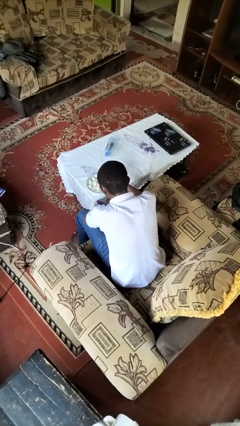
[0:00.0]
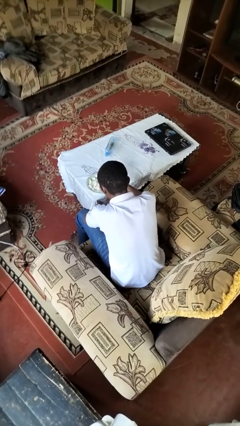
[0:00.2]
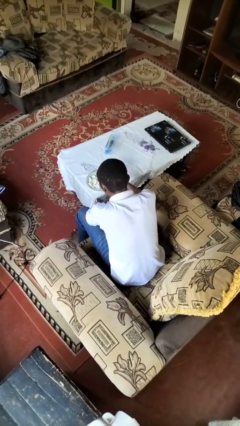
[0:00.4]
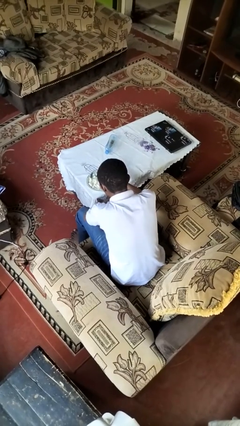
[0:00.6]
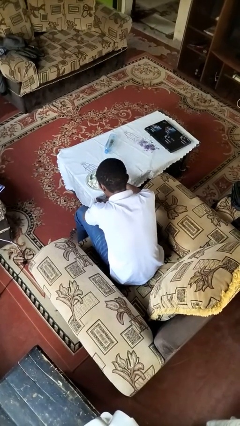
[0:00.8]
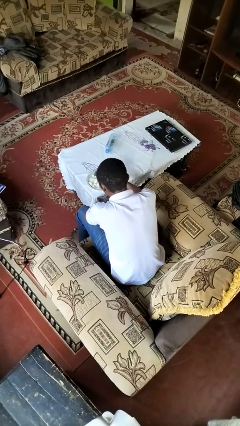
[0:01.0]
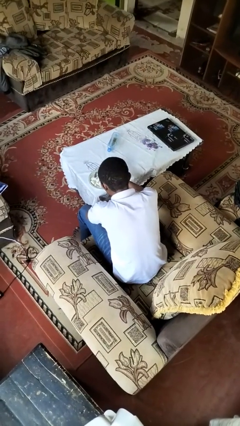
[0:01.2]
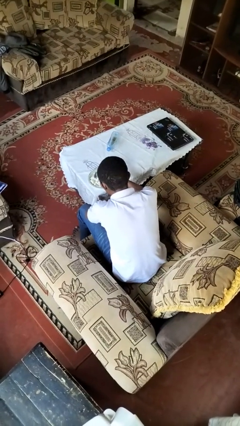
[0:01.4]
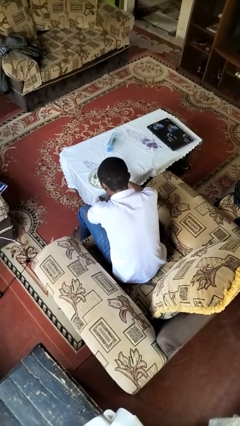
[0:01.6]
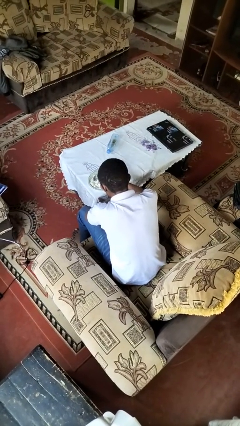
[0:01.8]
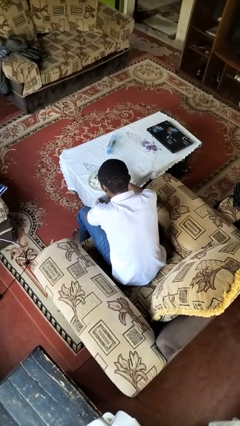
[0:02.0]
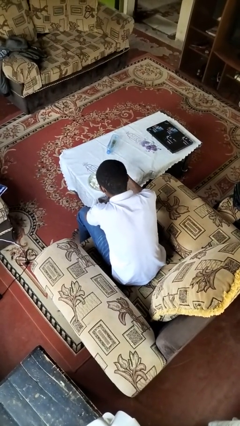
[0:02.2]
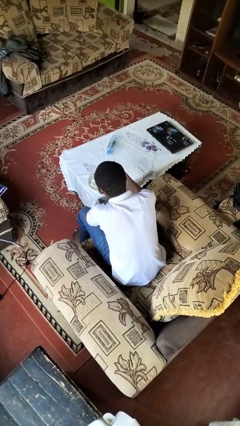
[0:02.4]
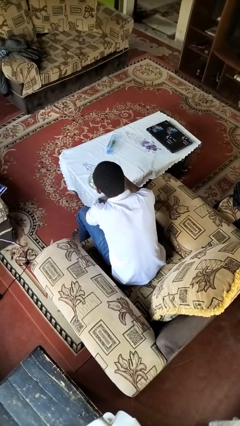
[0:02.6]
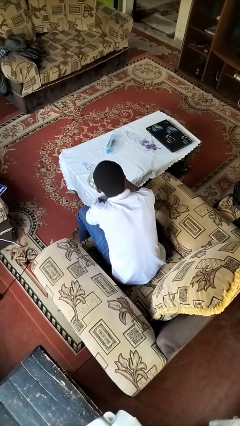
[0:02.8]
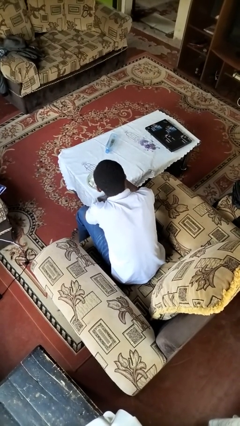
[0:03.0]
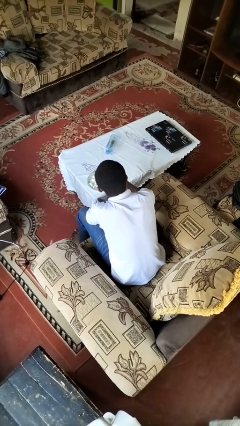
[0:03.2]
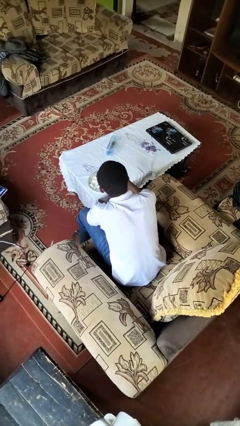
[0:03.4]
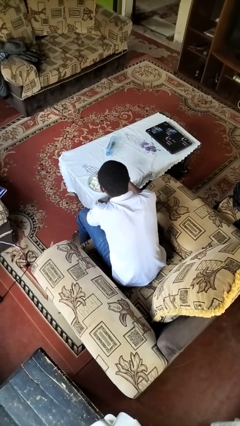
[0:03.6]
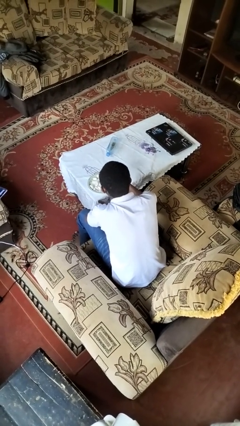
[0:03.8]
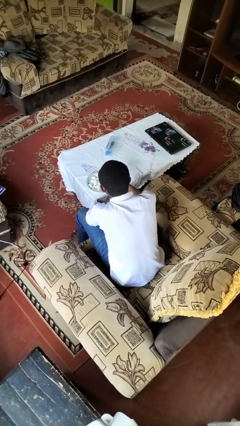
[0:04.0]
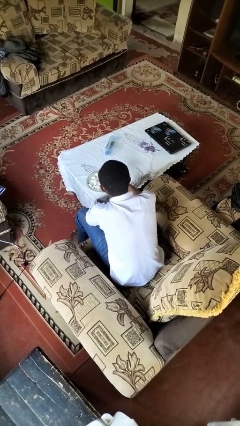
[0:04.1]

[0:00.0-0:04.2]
person eats with utensil

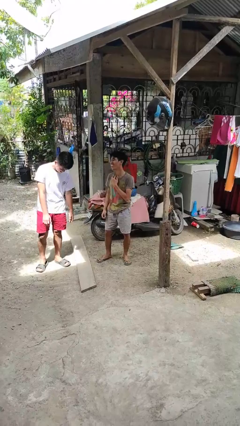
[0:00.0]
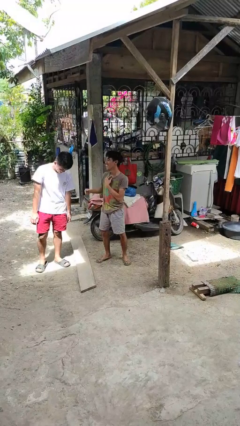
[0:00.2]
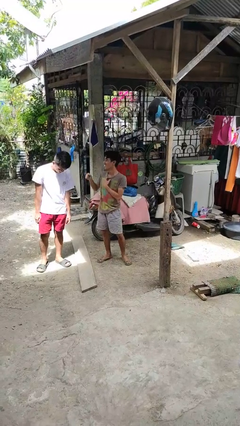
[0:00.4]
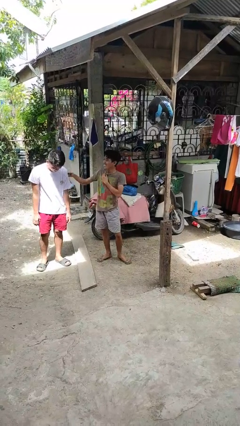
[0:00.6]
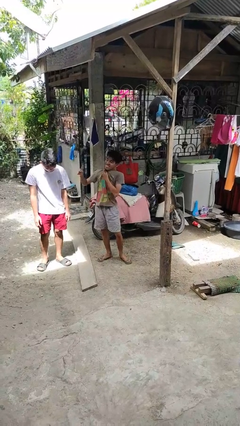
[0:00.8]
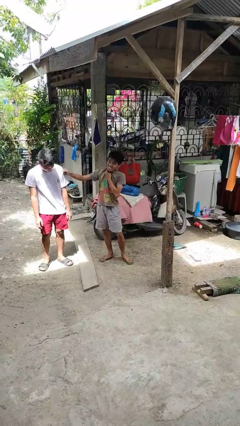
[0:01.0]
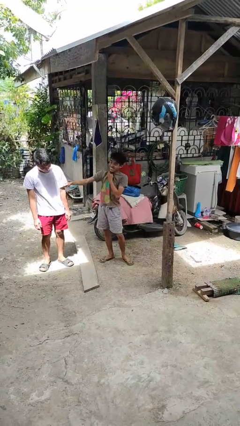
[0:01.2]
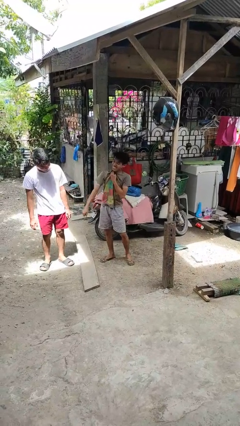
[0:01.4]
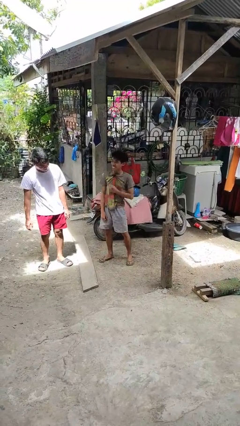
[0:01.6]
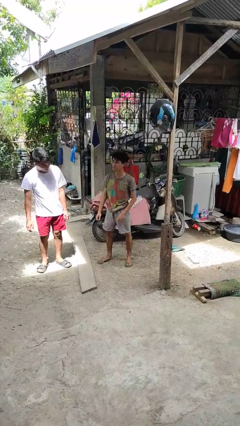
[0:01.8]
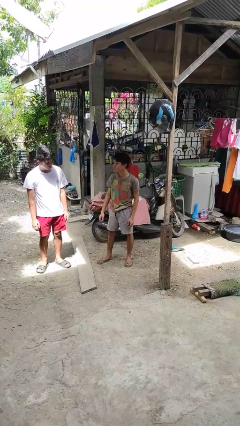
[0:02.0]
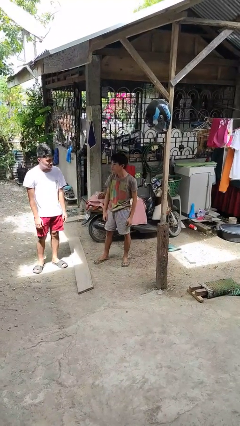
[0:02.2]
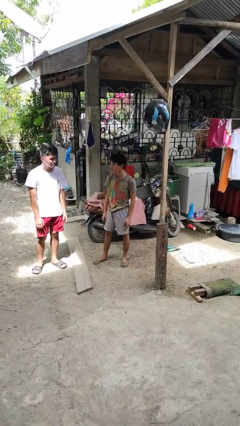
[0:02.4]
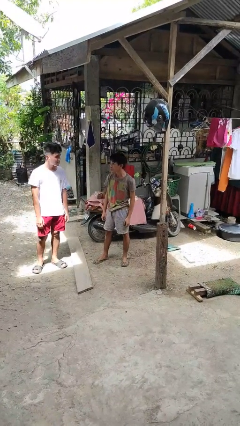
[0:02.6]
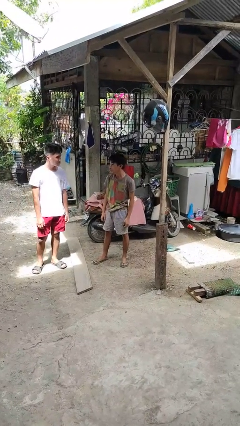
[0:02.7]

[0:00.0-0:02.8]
person pounds shoulders of person

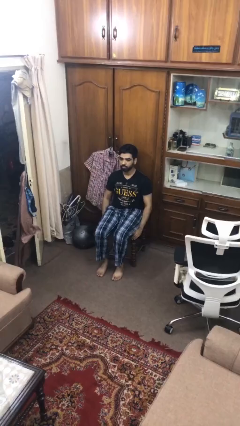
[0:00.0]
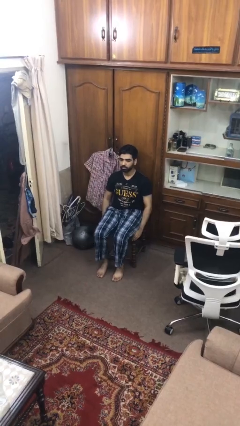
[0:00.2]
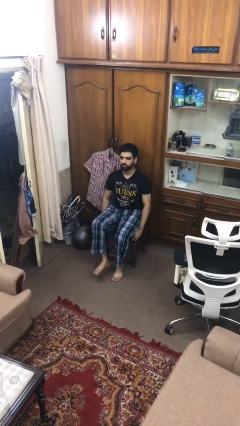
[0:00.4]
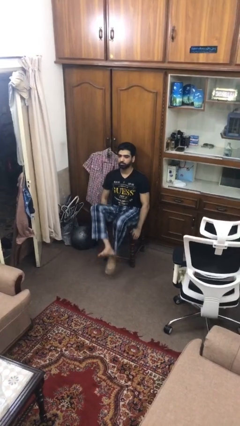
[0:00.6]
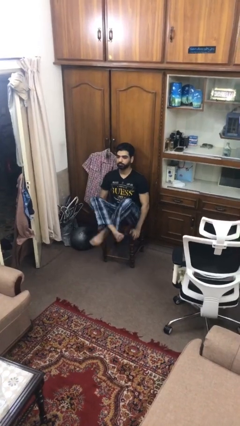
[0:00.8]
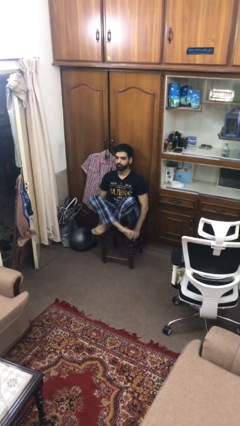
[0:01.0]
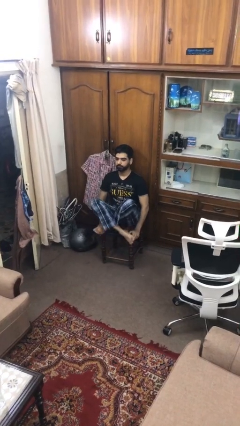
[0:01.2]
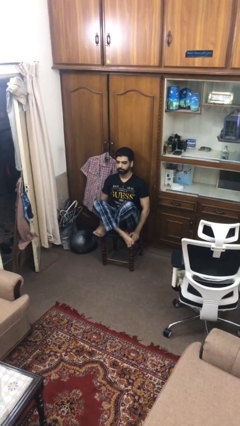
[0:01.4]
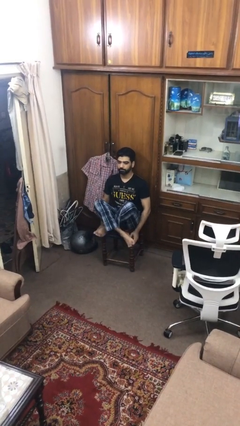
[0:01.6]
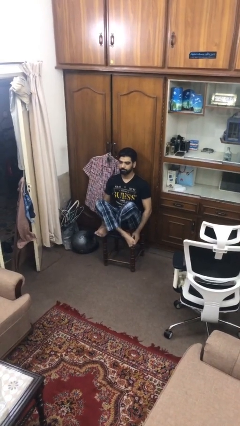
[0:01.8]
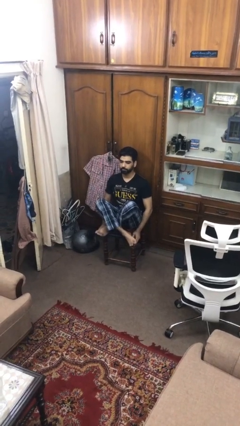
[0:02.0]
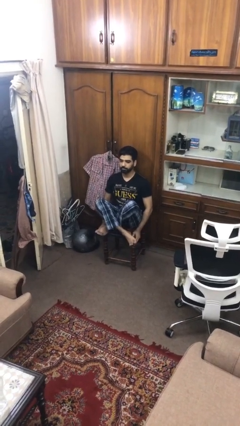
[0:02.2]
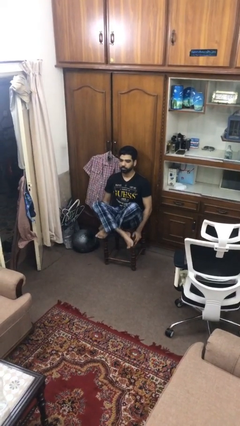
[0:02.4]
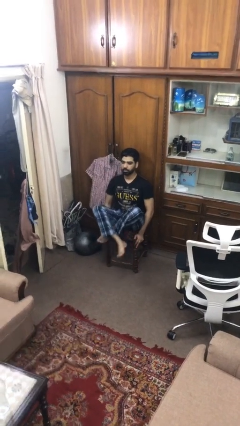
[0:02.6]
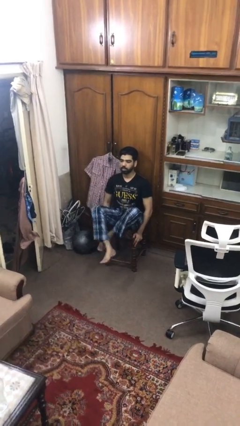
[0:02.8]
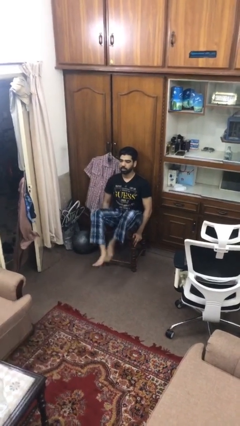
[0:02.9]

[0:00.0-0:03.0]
person crosses legs

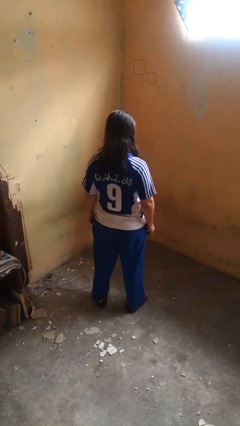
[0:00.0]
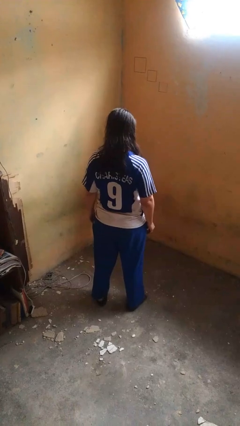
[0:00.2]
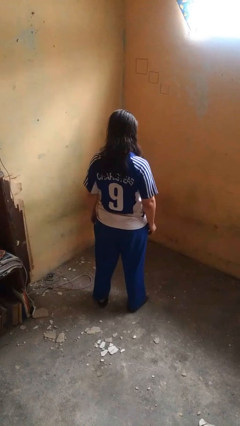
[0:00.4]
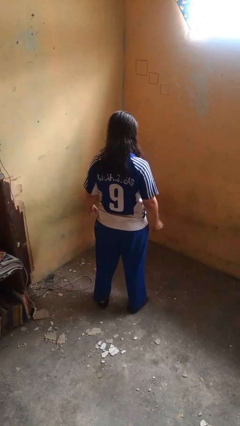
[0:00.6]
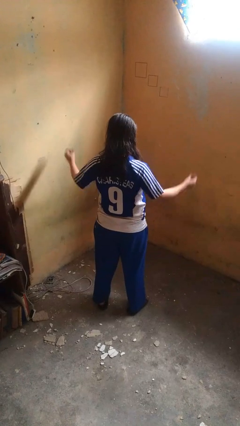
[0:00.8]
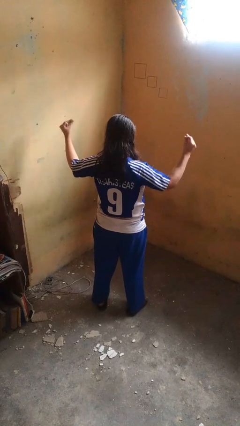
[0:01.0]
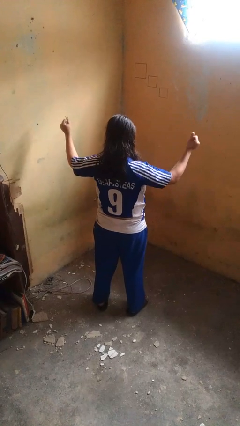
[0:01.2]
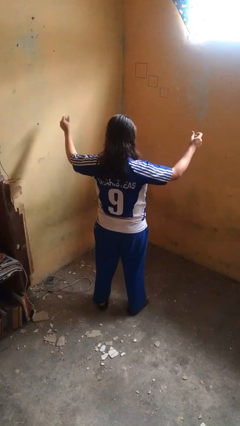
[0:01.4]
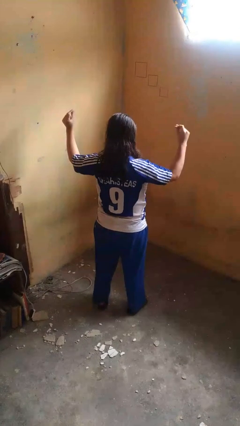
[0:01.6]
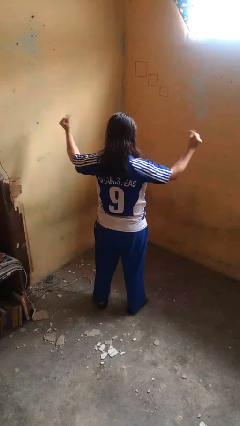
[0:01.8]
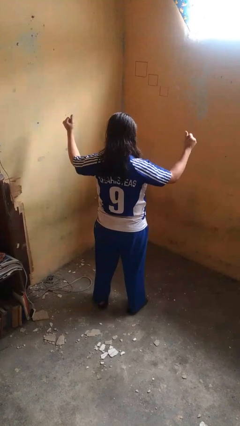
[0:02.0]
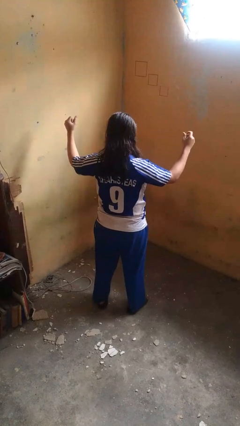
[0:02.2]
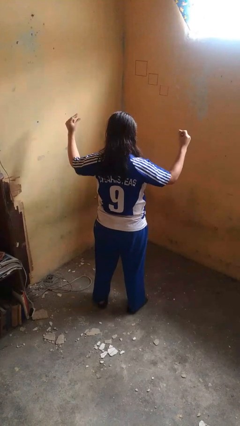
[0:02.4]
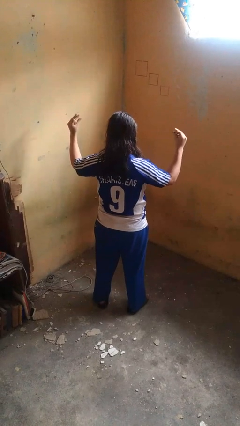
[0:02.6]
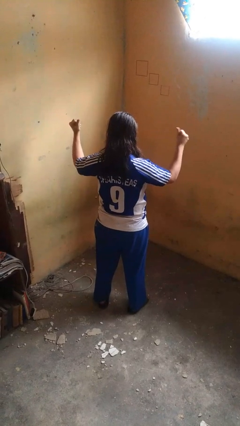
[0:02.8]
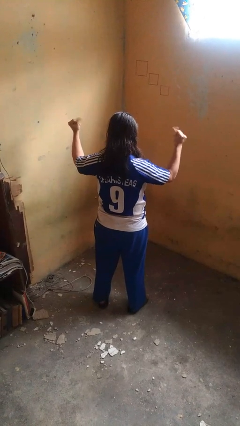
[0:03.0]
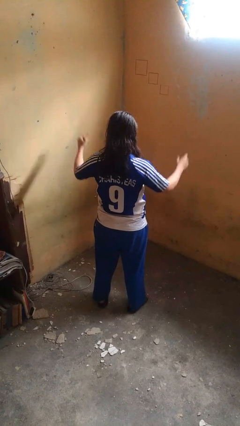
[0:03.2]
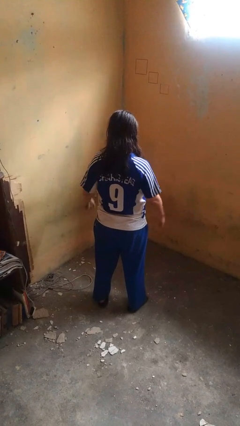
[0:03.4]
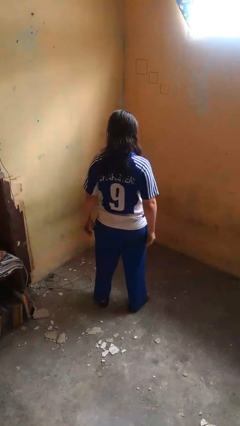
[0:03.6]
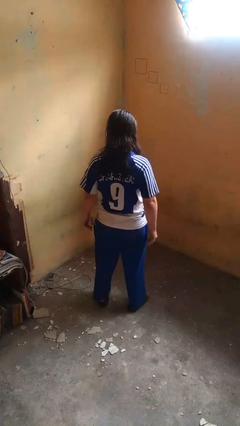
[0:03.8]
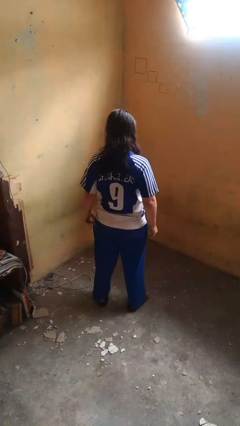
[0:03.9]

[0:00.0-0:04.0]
person snaps fingers

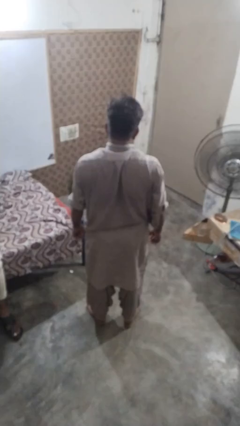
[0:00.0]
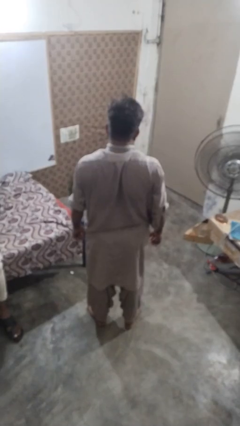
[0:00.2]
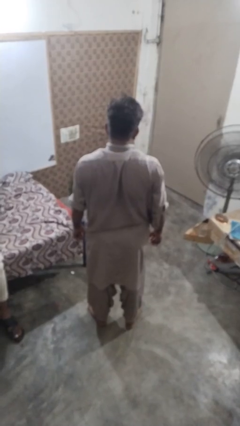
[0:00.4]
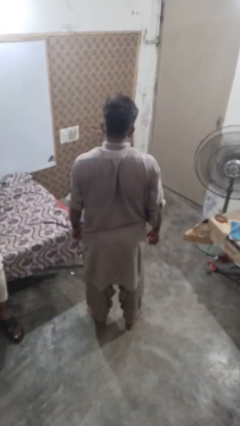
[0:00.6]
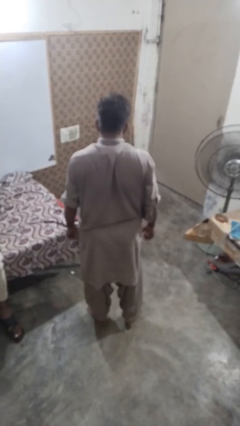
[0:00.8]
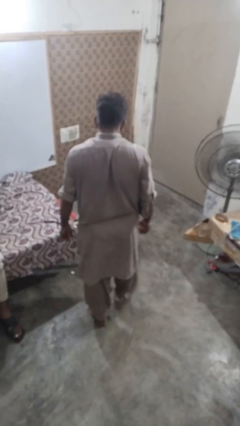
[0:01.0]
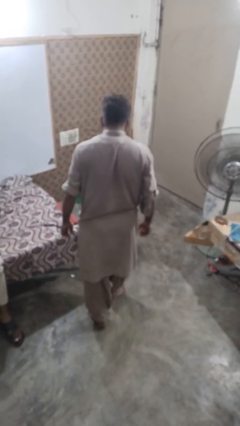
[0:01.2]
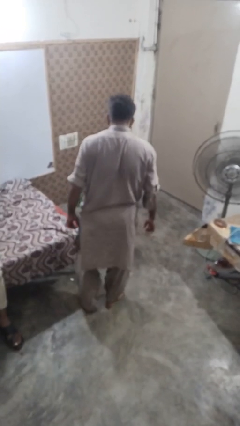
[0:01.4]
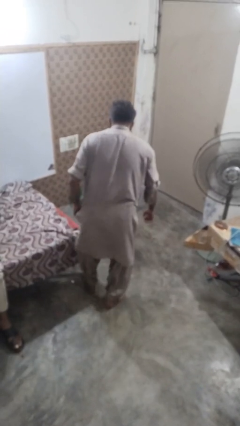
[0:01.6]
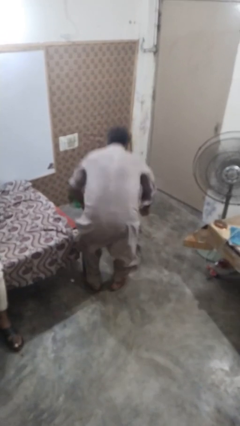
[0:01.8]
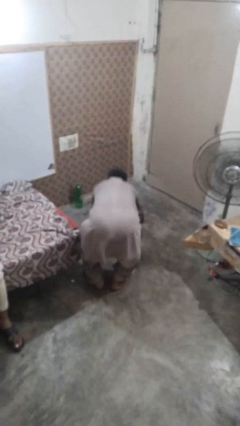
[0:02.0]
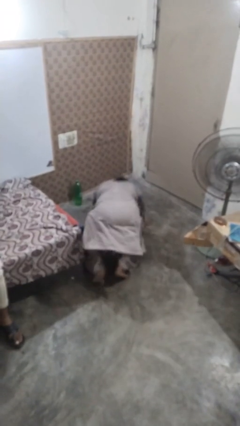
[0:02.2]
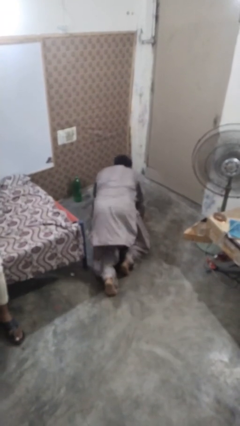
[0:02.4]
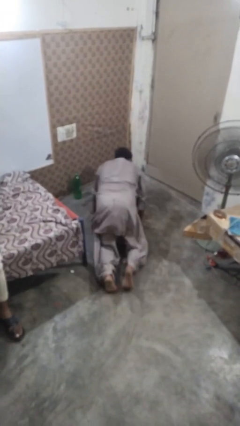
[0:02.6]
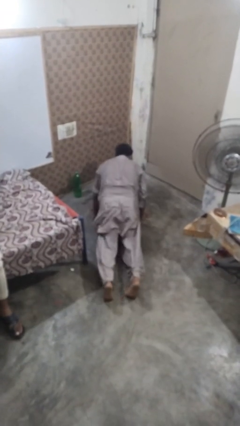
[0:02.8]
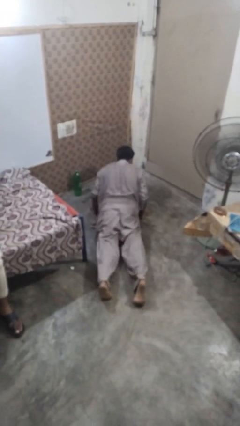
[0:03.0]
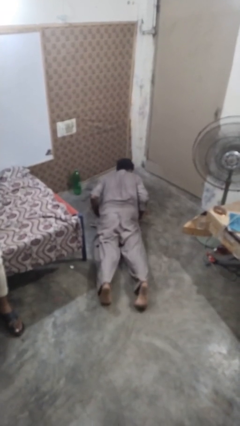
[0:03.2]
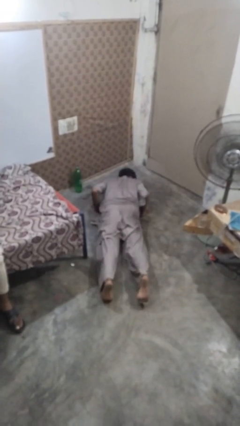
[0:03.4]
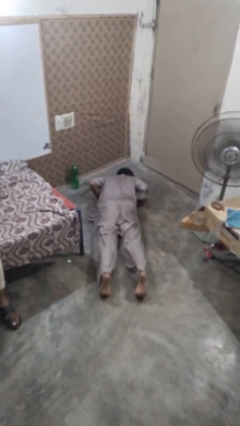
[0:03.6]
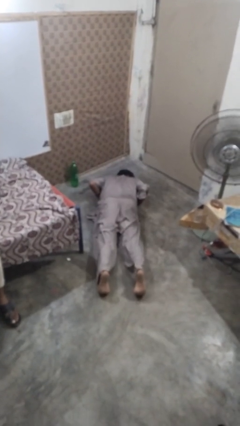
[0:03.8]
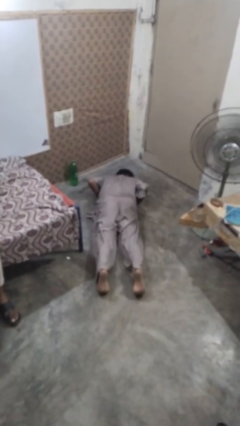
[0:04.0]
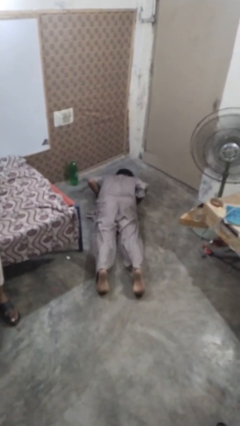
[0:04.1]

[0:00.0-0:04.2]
person trips on object on floor
